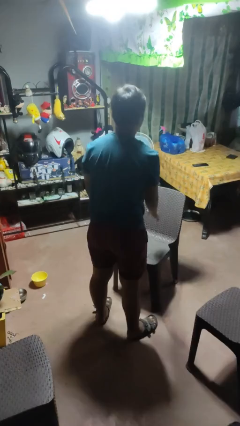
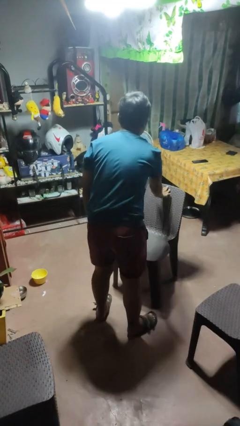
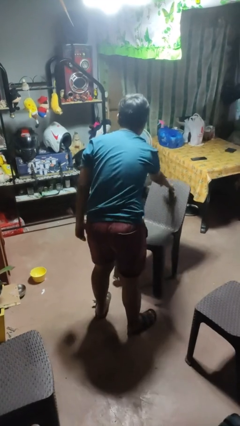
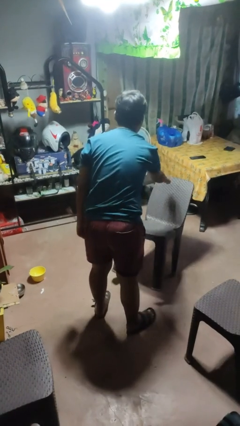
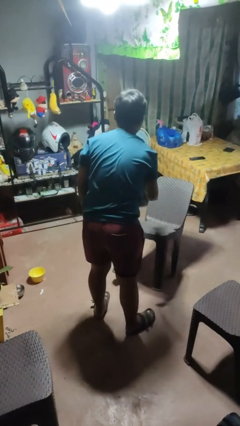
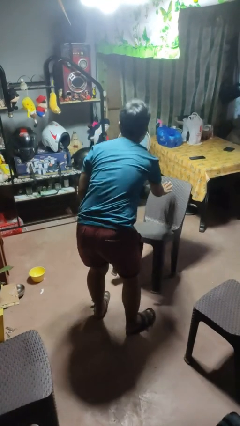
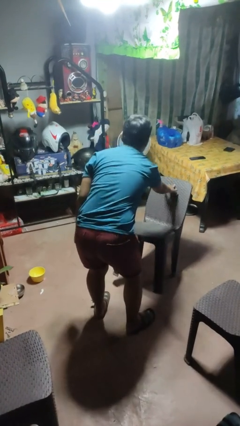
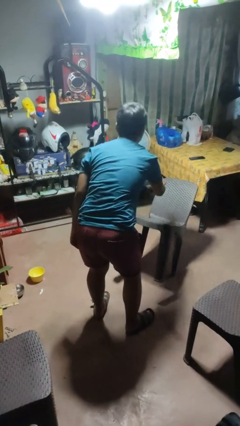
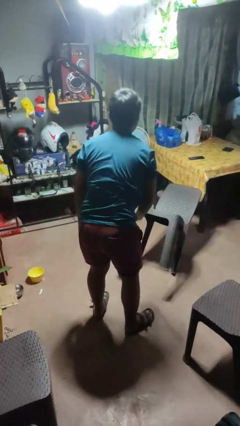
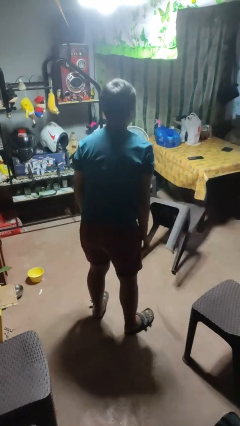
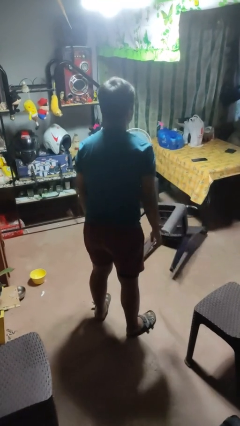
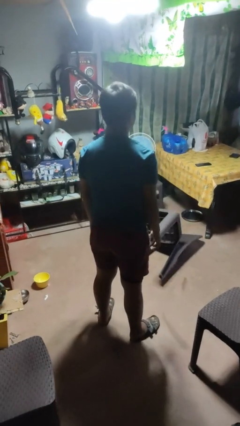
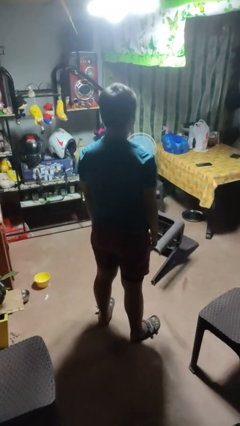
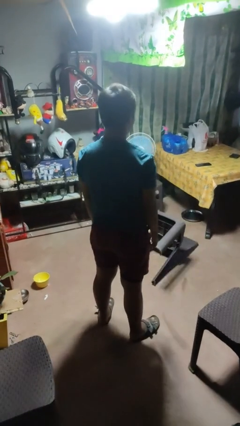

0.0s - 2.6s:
person knocks over furniture

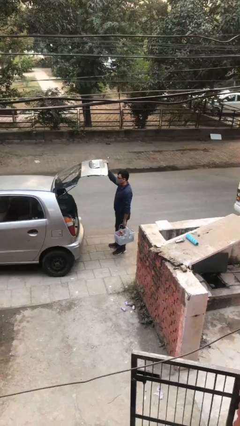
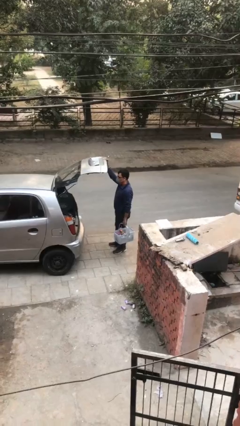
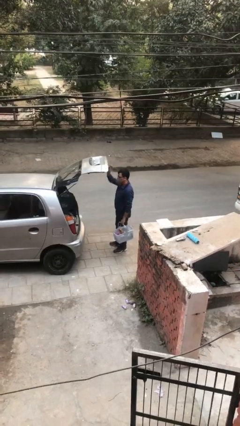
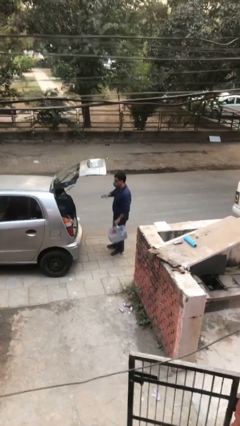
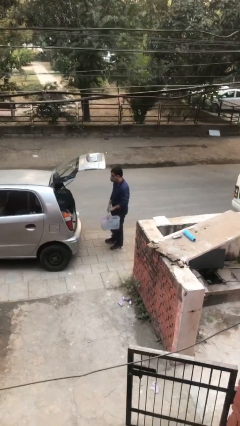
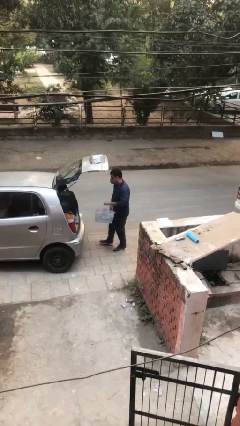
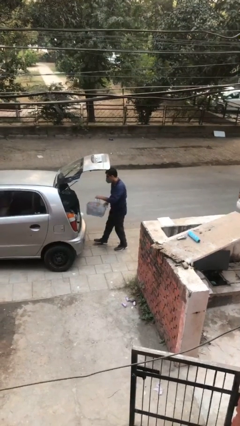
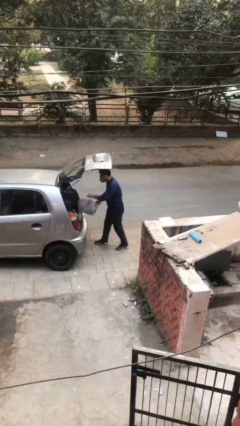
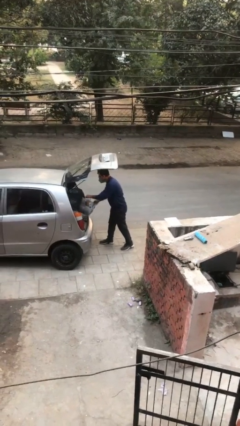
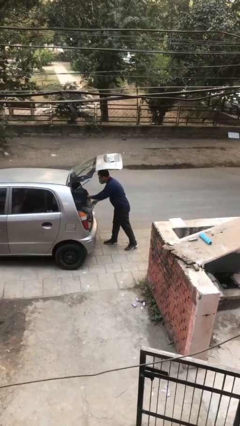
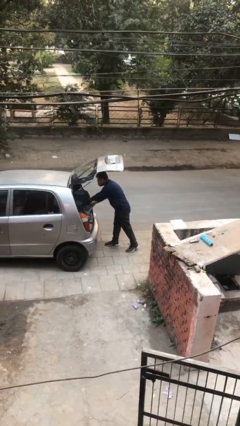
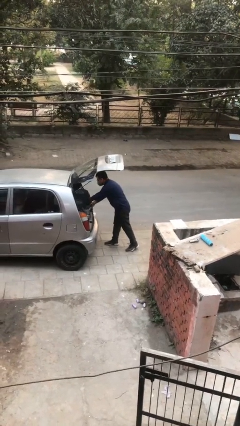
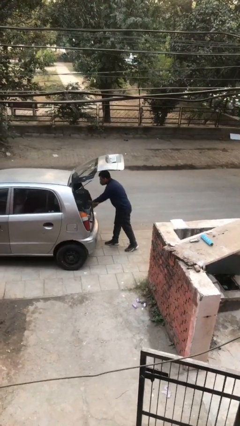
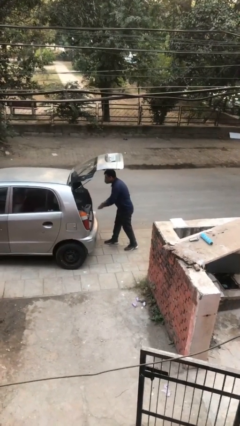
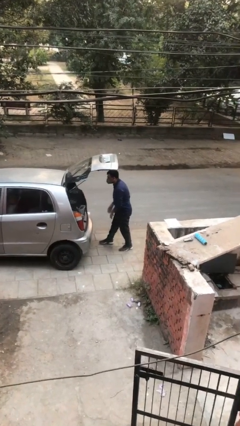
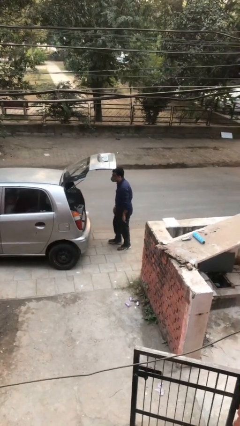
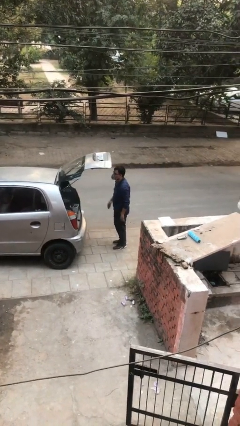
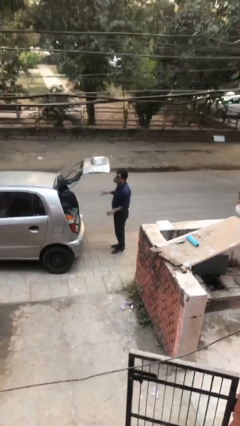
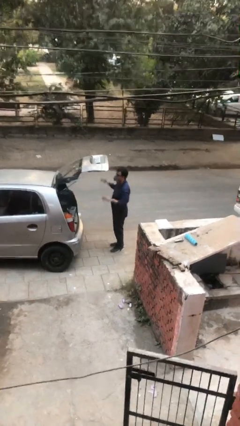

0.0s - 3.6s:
person loads car

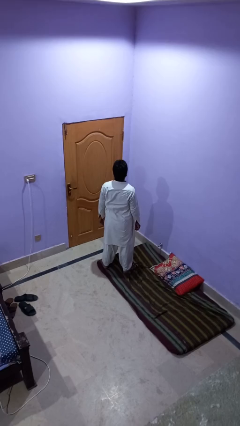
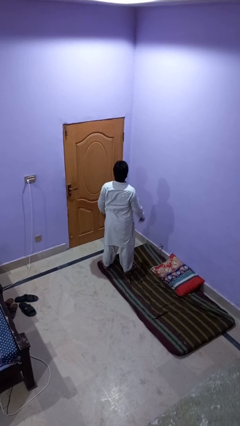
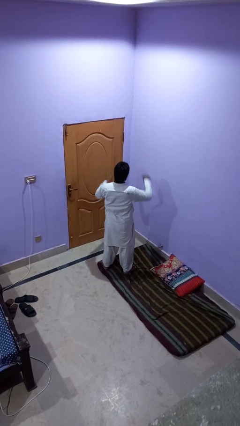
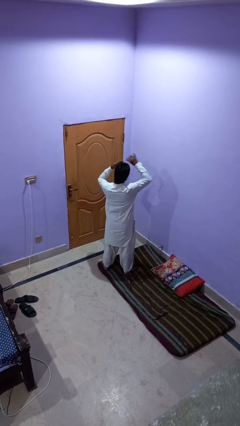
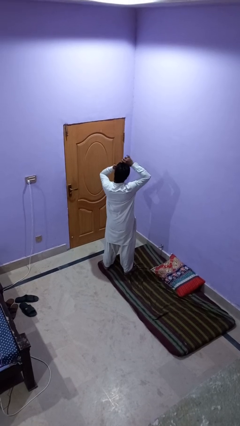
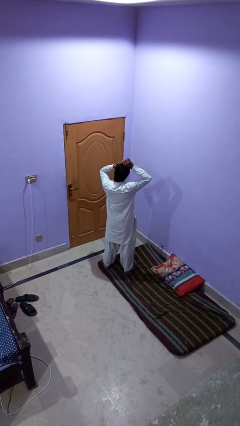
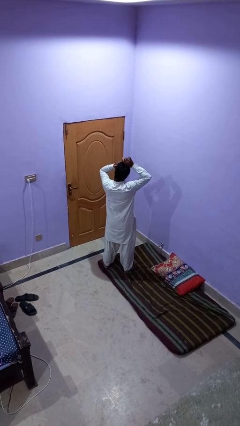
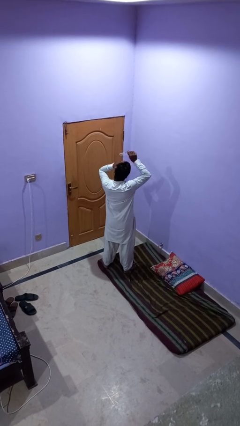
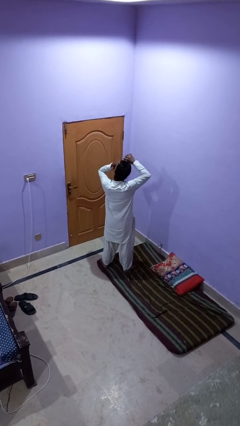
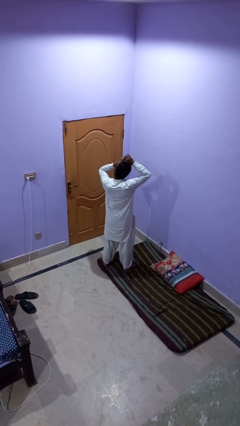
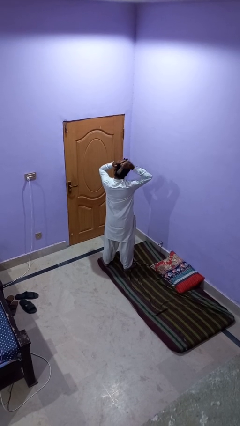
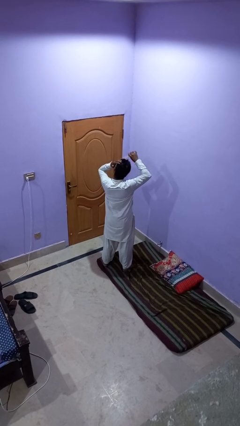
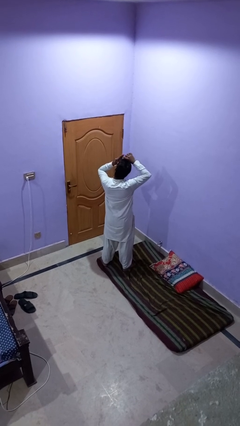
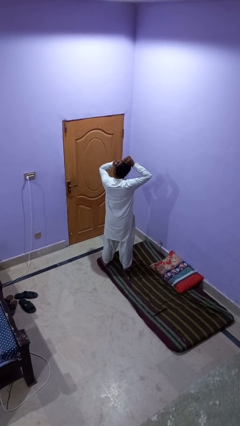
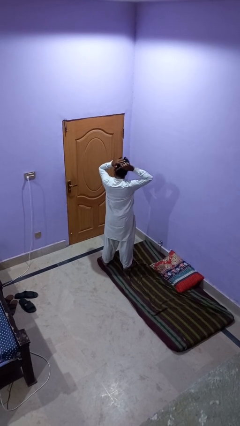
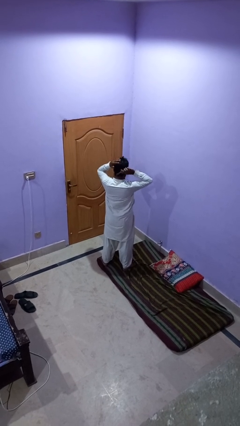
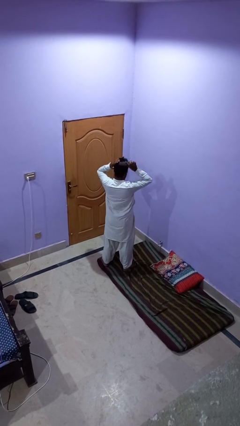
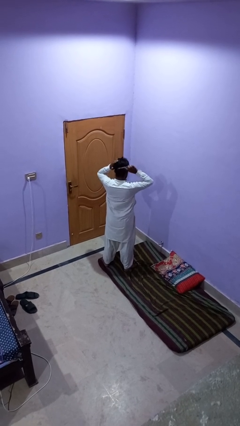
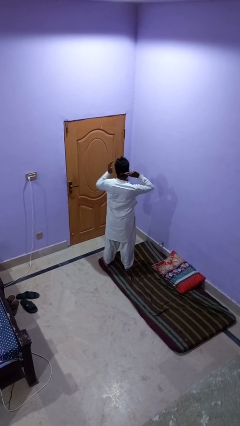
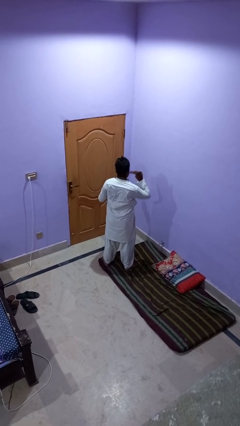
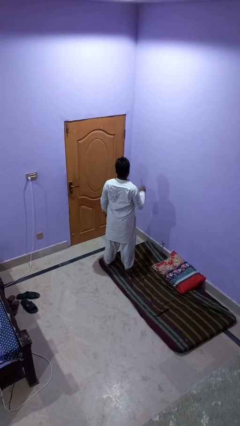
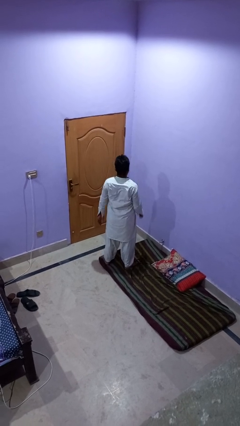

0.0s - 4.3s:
person brushes hair

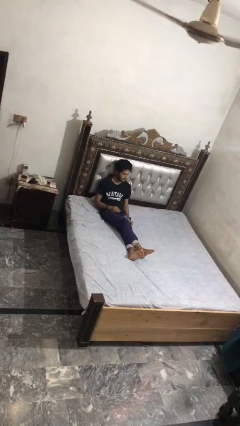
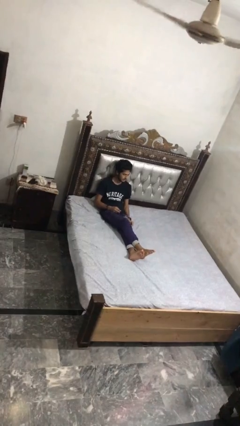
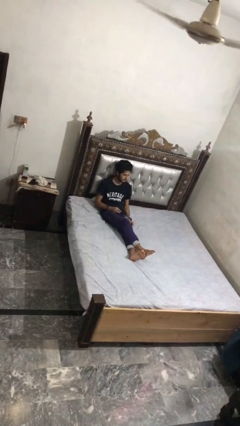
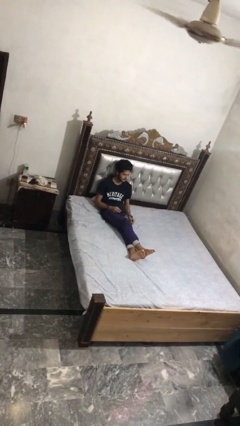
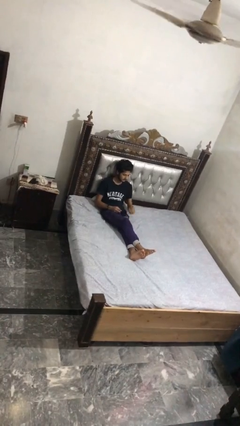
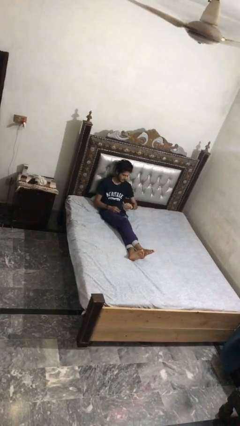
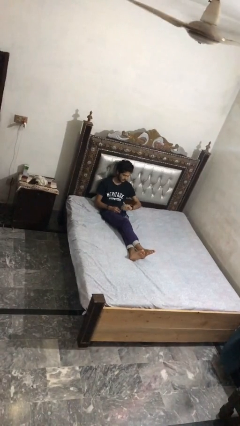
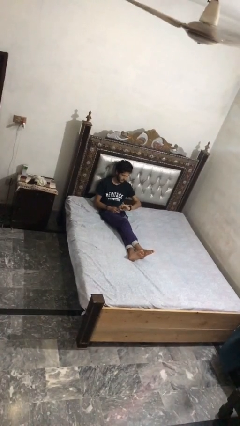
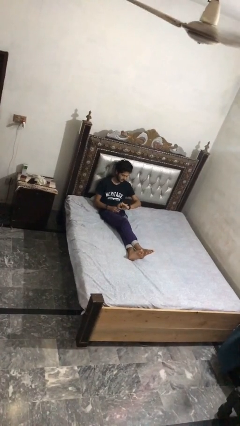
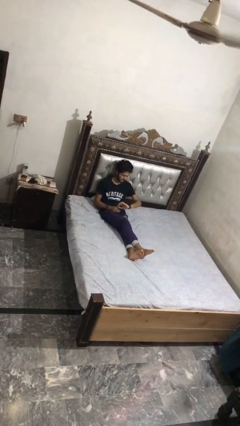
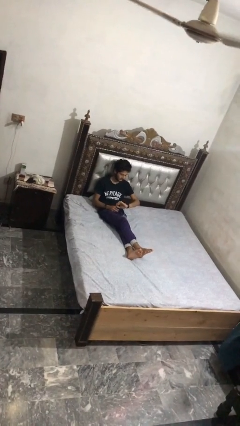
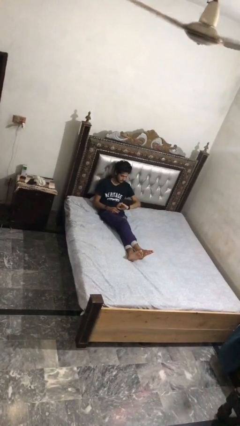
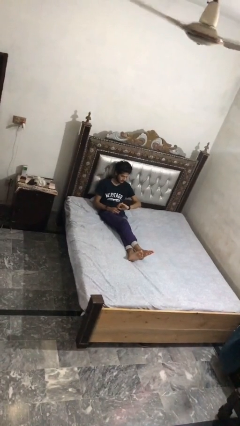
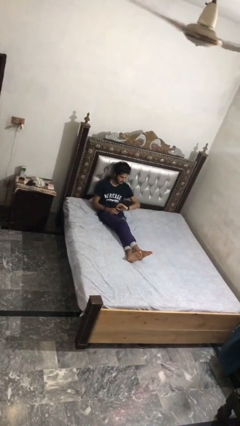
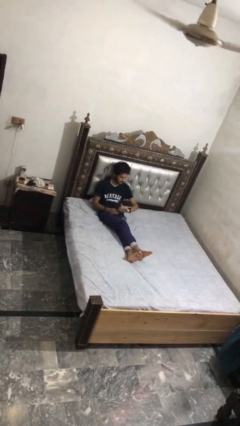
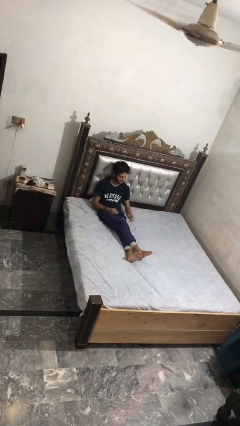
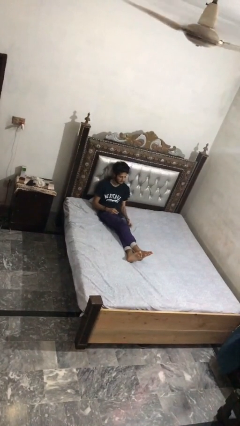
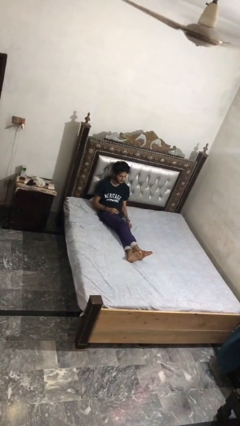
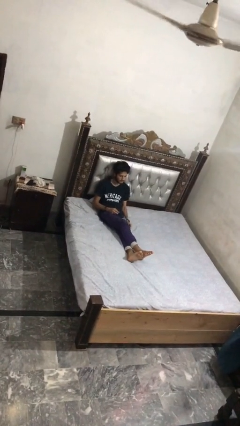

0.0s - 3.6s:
person looks at wristwatch

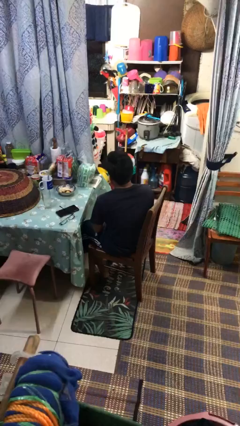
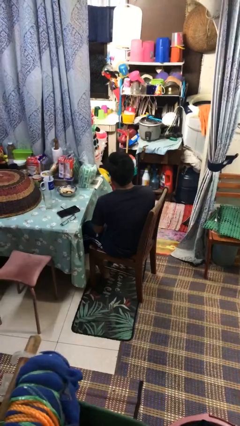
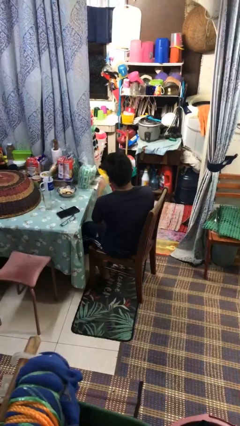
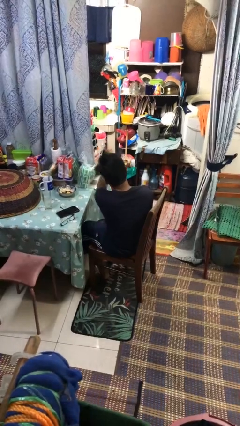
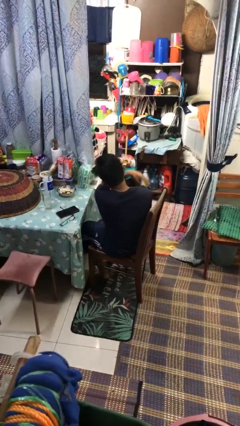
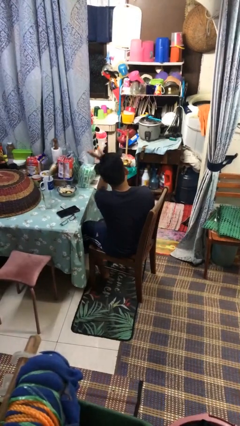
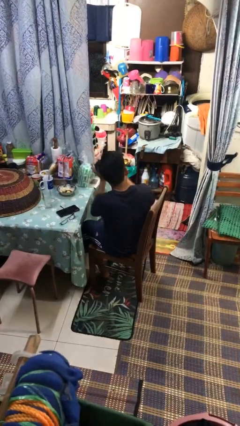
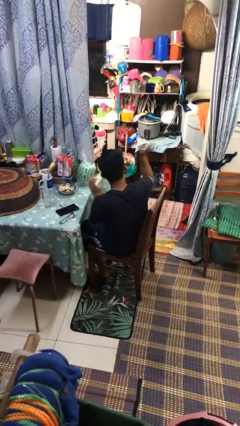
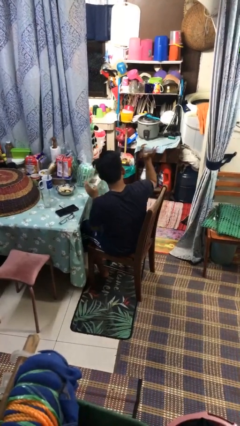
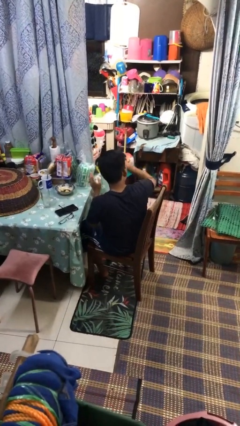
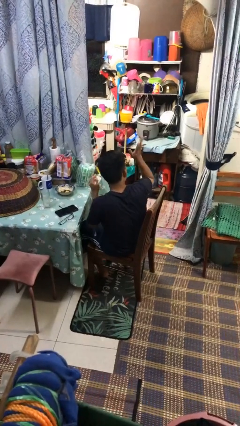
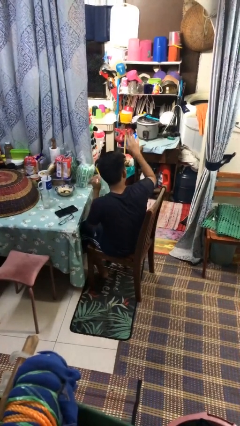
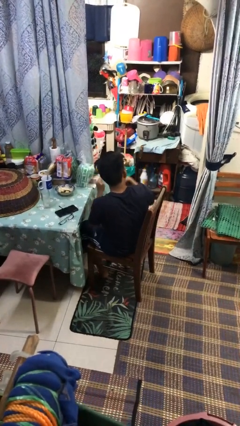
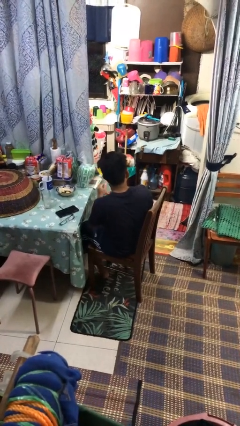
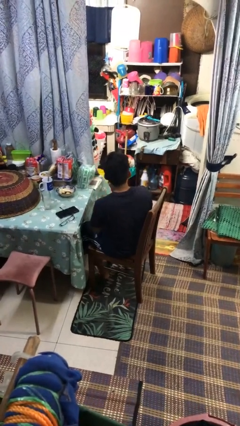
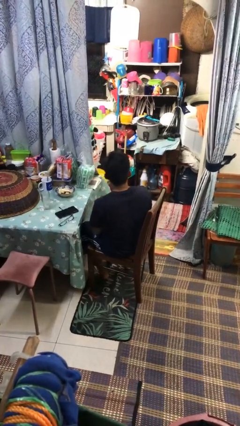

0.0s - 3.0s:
person swats bug

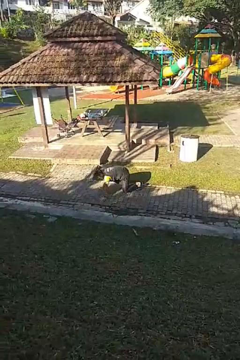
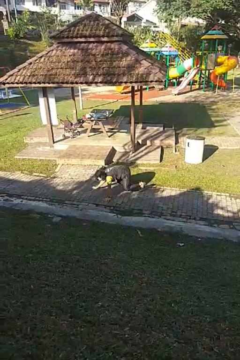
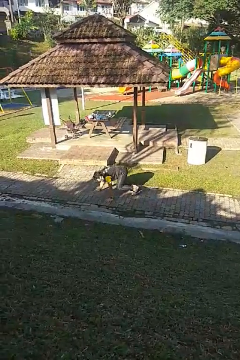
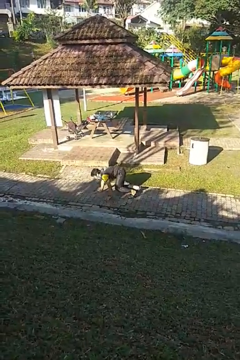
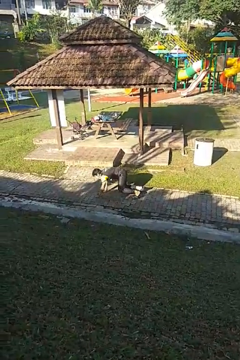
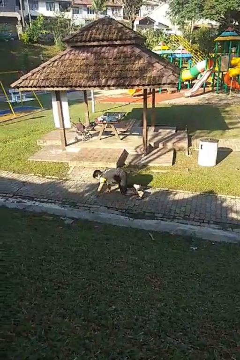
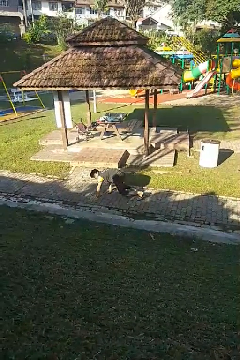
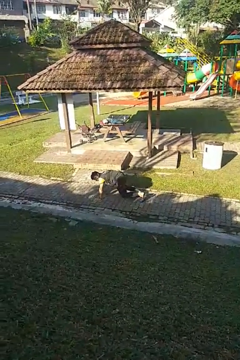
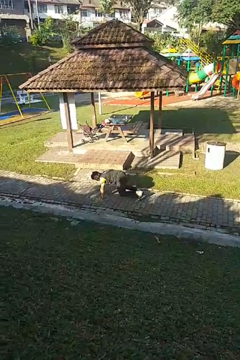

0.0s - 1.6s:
person crawls
